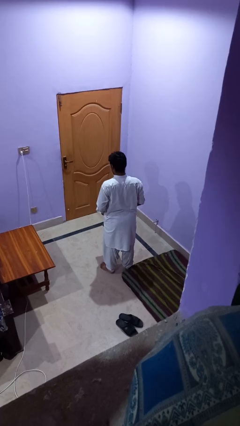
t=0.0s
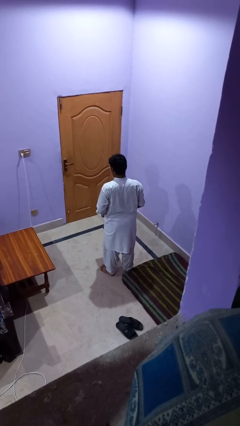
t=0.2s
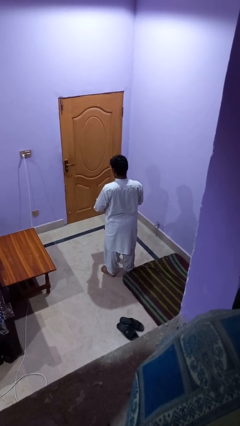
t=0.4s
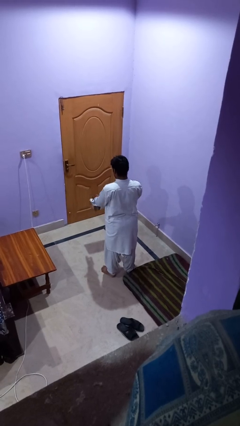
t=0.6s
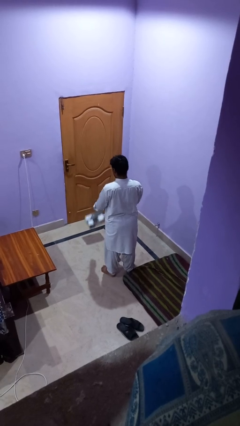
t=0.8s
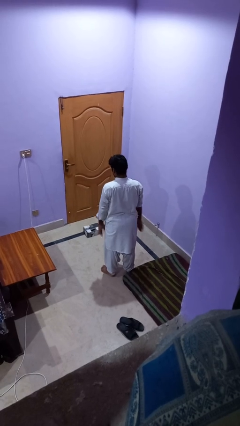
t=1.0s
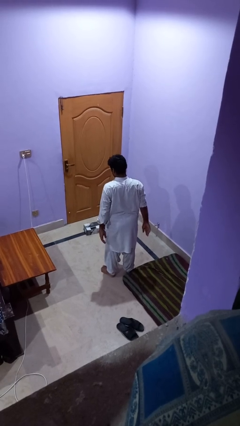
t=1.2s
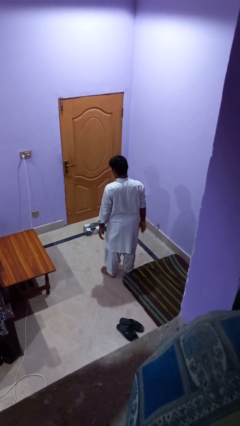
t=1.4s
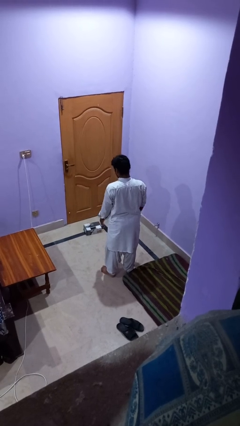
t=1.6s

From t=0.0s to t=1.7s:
person throws object to ground

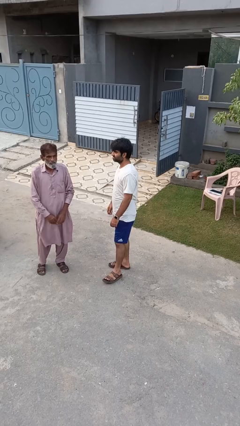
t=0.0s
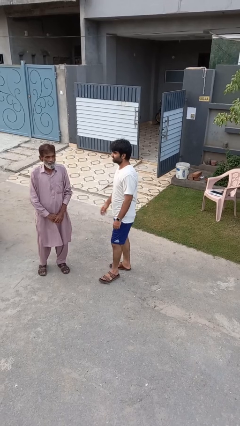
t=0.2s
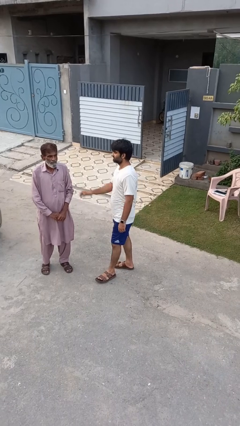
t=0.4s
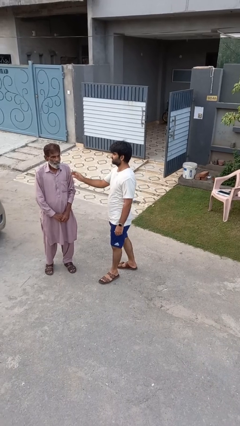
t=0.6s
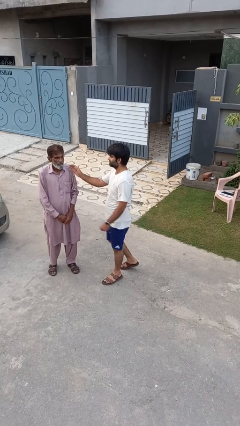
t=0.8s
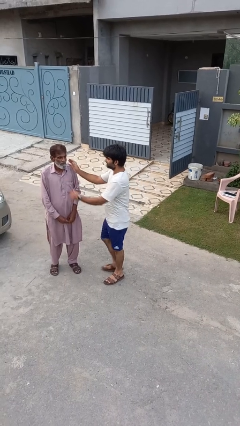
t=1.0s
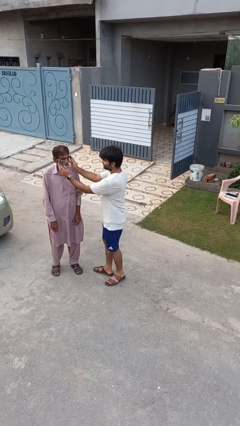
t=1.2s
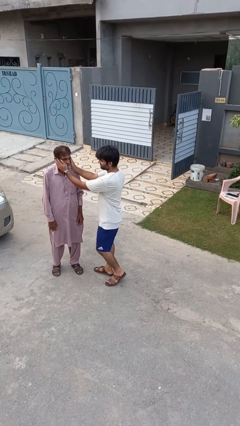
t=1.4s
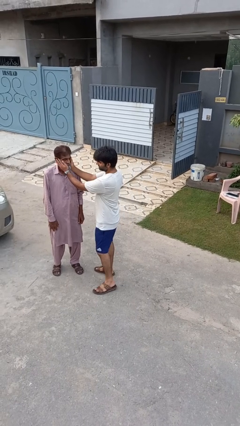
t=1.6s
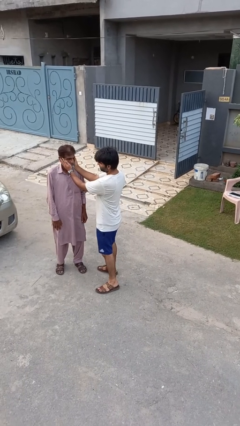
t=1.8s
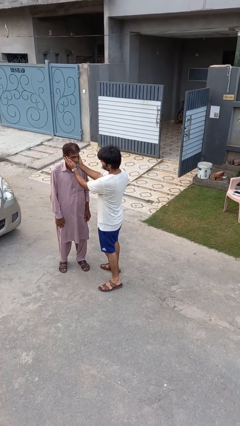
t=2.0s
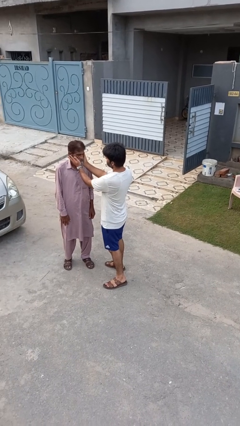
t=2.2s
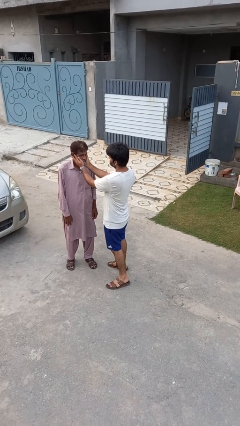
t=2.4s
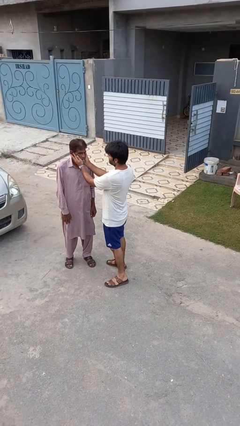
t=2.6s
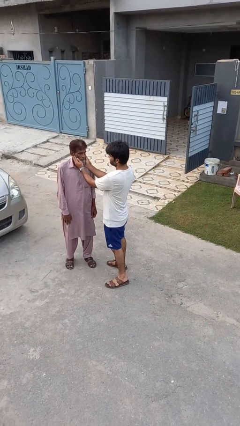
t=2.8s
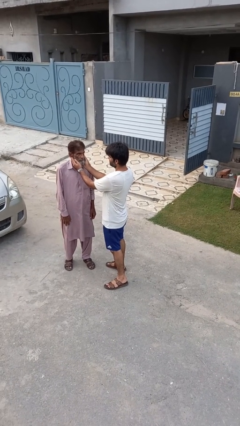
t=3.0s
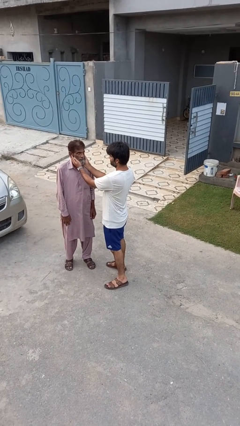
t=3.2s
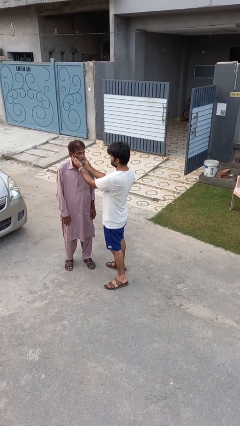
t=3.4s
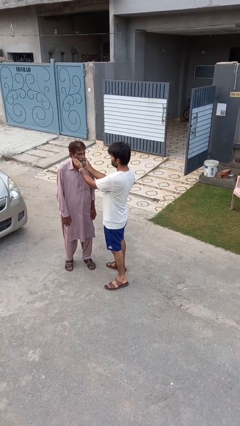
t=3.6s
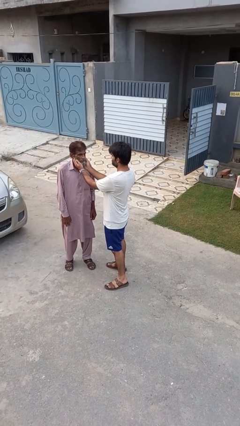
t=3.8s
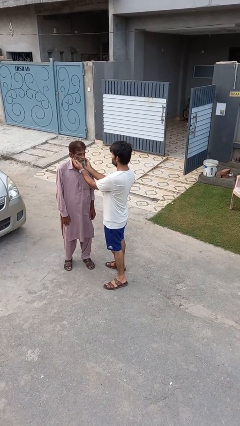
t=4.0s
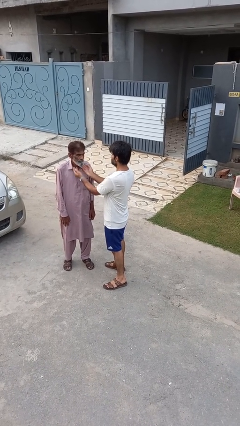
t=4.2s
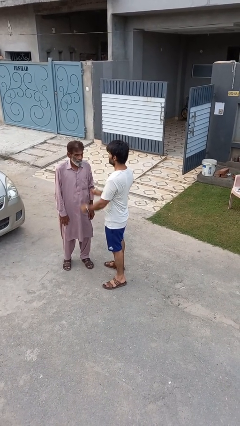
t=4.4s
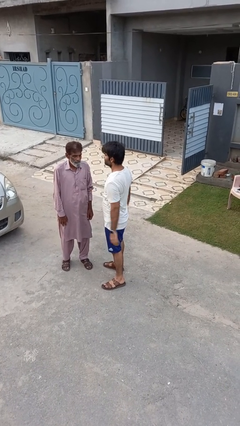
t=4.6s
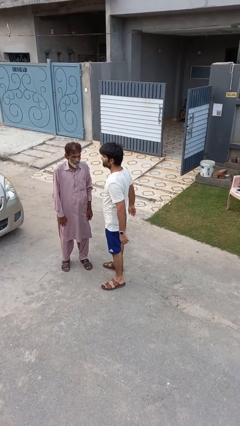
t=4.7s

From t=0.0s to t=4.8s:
person touches face of person

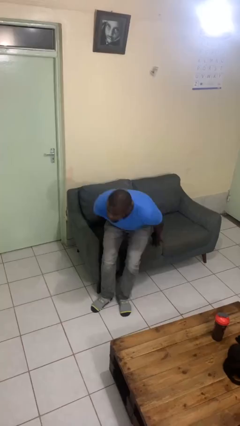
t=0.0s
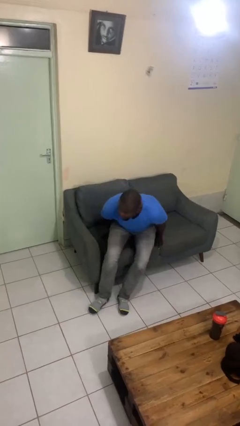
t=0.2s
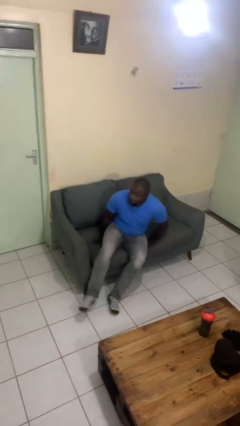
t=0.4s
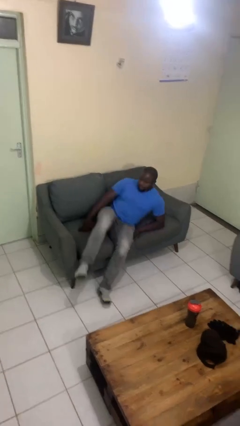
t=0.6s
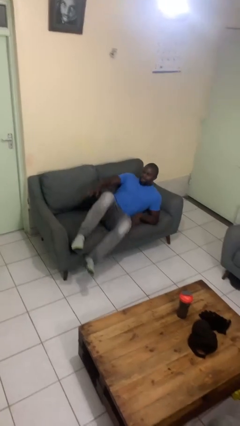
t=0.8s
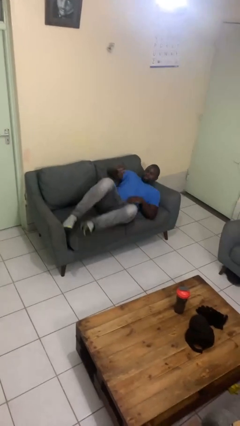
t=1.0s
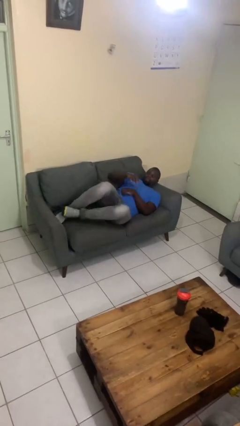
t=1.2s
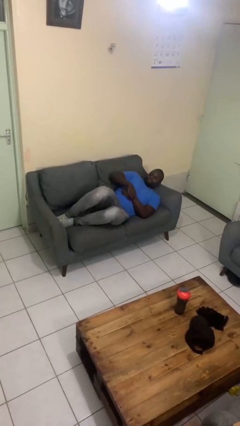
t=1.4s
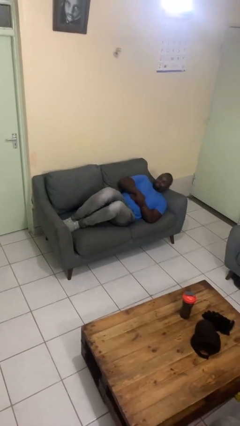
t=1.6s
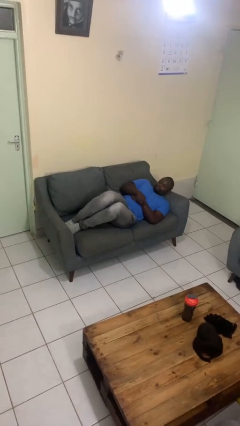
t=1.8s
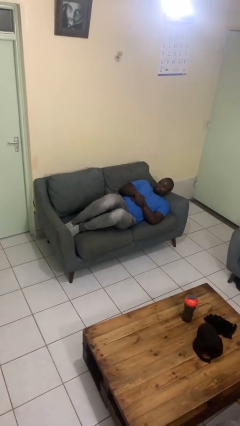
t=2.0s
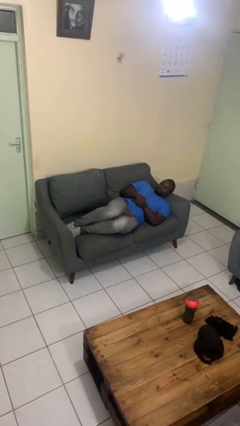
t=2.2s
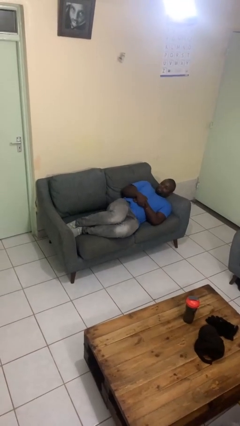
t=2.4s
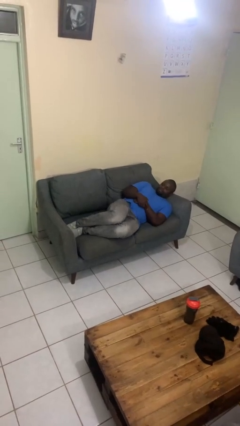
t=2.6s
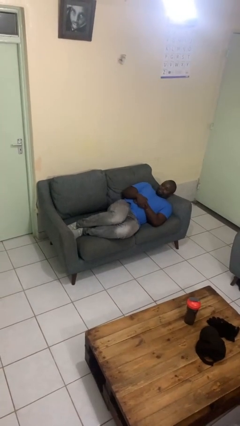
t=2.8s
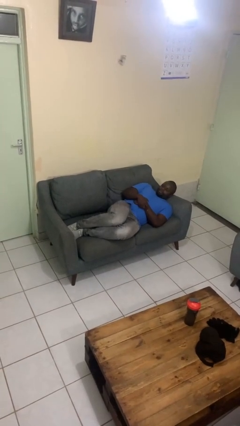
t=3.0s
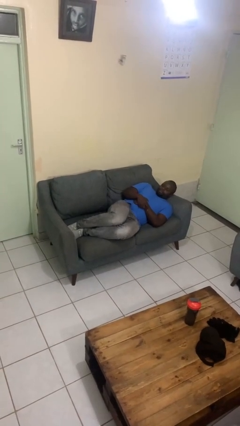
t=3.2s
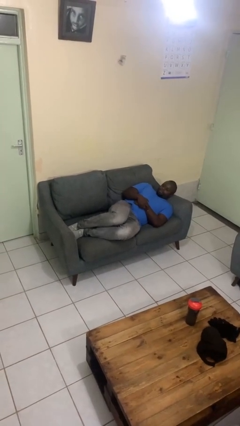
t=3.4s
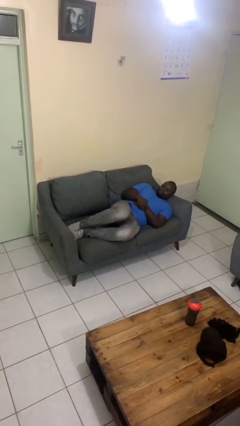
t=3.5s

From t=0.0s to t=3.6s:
person lies down on couch

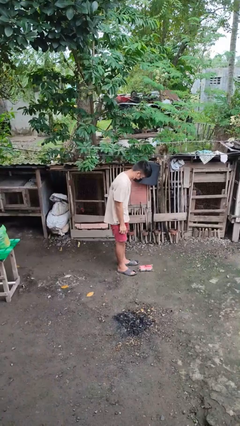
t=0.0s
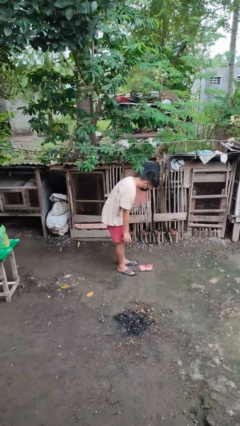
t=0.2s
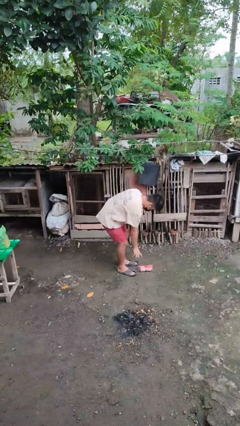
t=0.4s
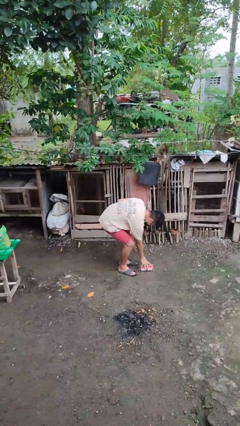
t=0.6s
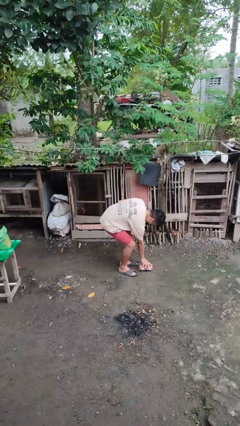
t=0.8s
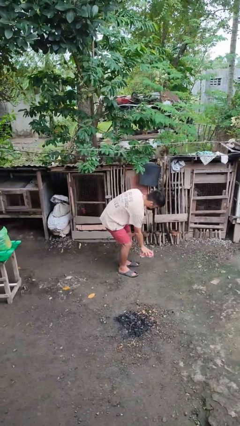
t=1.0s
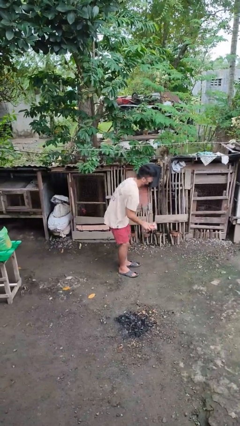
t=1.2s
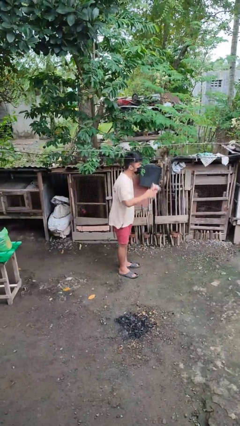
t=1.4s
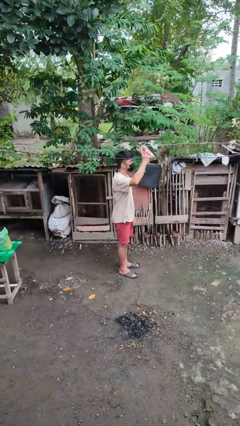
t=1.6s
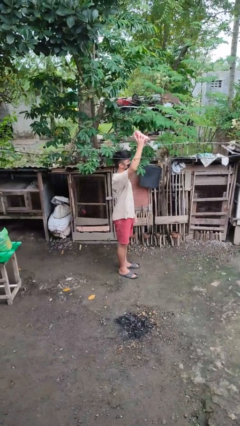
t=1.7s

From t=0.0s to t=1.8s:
person picks up object from floor

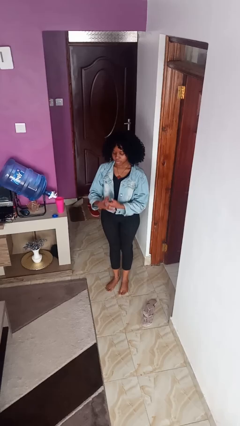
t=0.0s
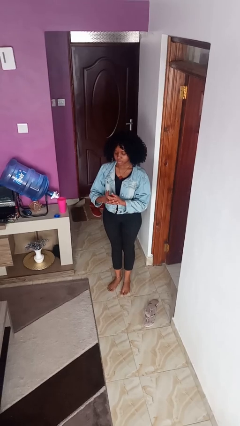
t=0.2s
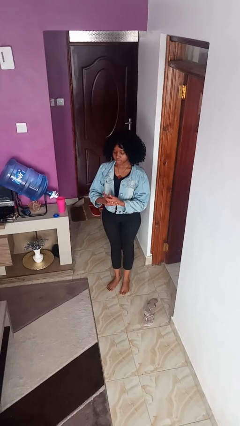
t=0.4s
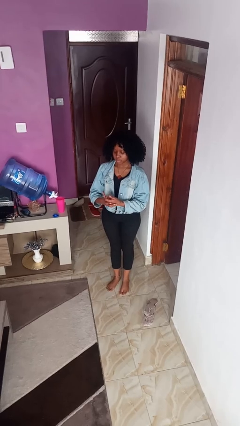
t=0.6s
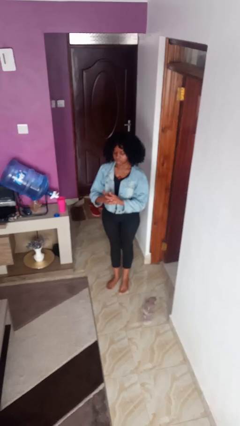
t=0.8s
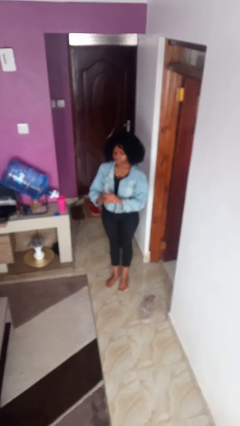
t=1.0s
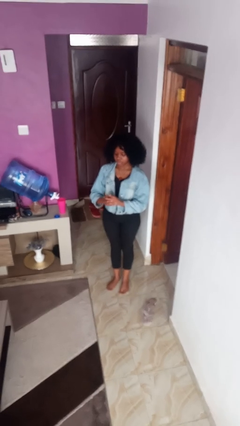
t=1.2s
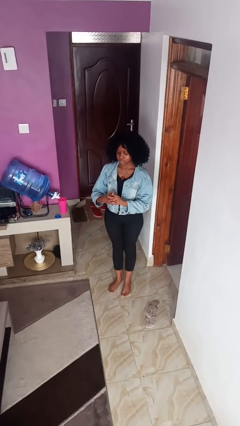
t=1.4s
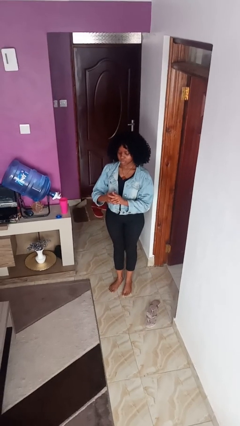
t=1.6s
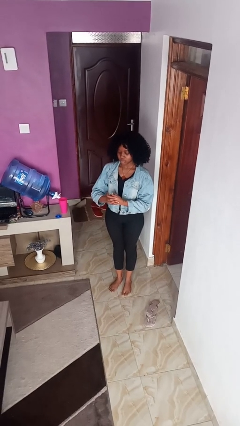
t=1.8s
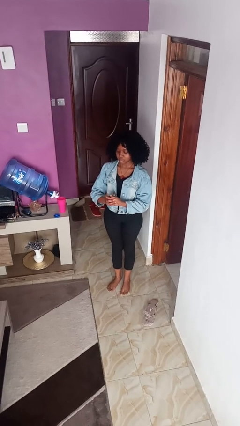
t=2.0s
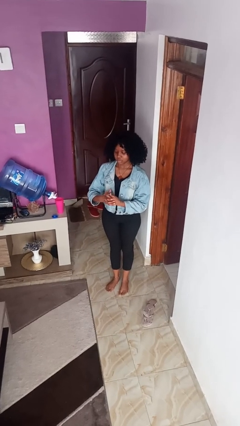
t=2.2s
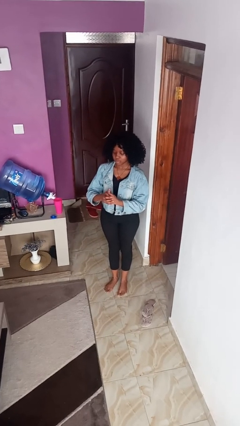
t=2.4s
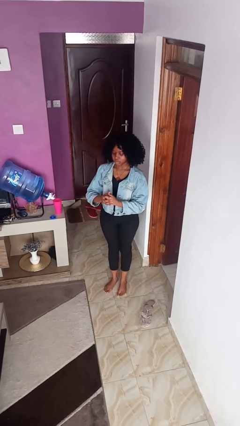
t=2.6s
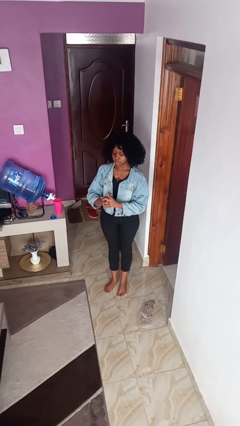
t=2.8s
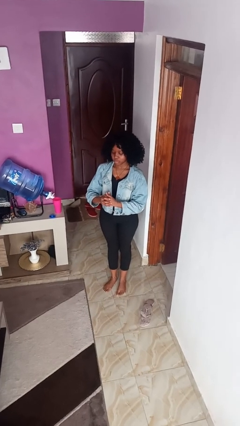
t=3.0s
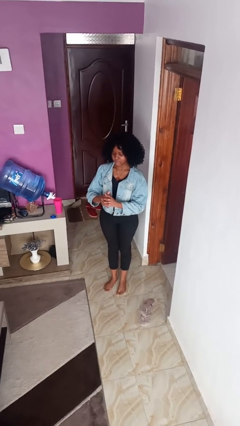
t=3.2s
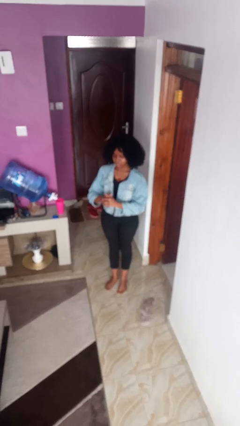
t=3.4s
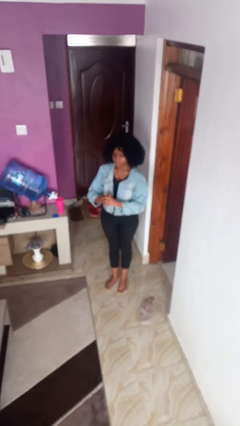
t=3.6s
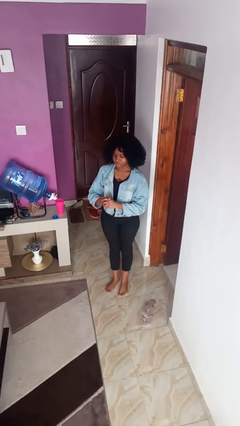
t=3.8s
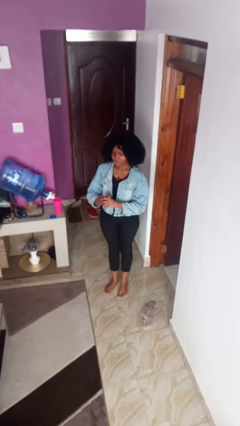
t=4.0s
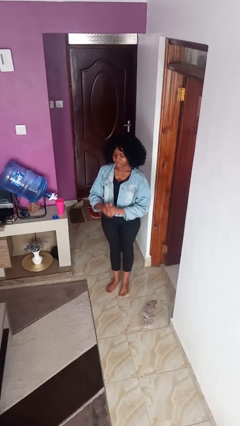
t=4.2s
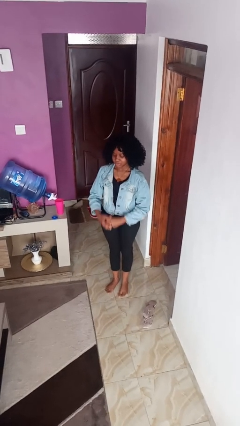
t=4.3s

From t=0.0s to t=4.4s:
person cracks knuckles

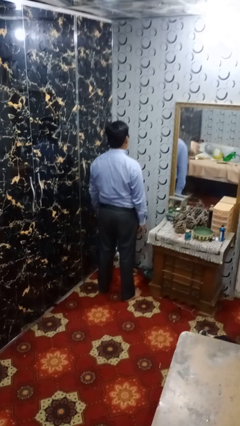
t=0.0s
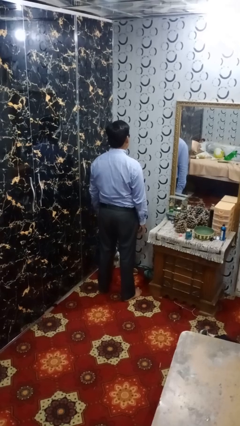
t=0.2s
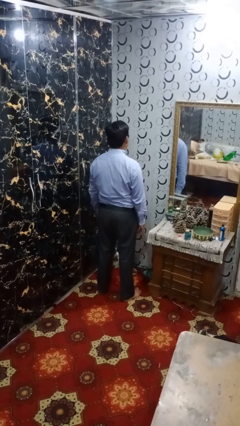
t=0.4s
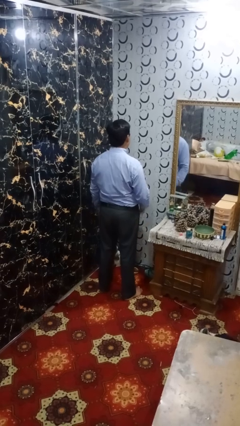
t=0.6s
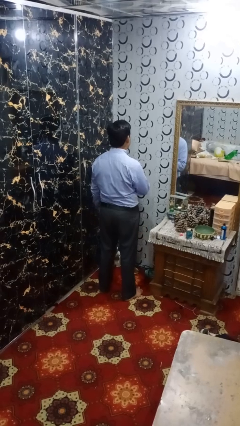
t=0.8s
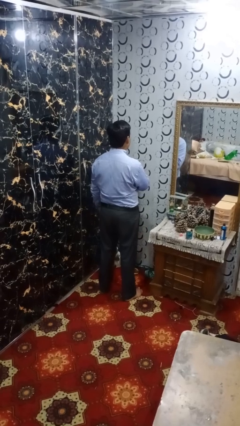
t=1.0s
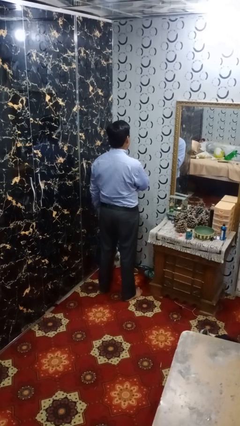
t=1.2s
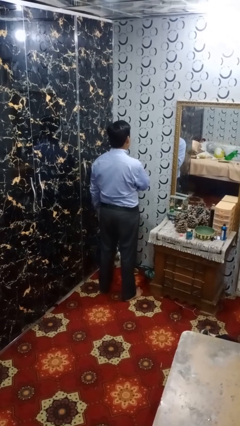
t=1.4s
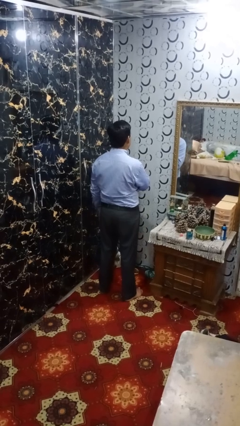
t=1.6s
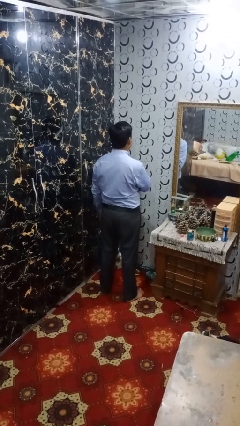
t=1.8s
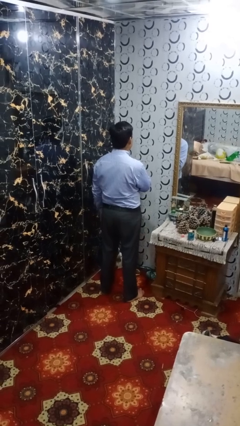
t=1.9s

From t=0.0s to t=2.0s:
person drums on chest
